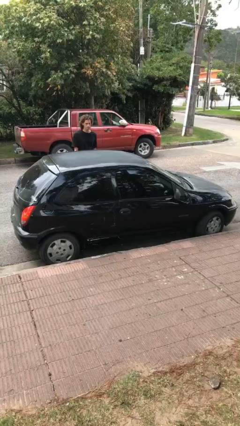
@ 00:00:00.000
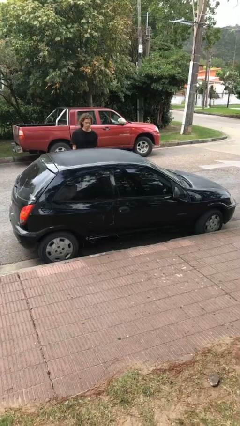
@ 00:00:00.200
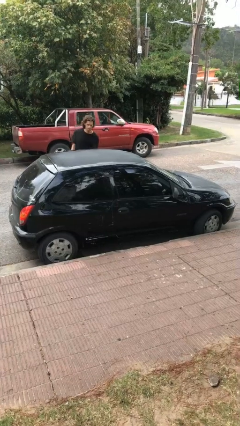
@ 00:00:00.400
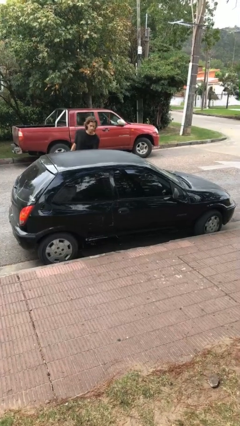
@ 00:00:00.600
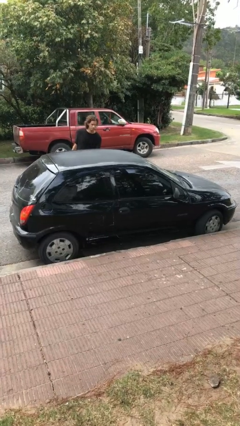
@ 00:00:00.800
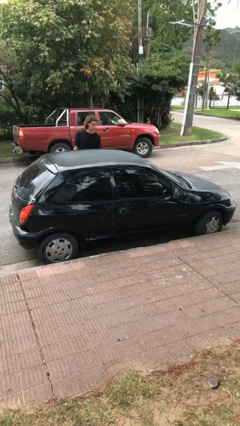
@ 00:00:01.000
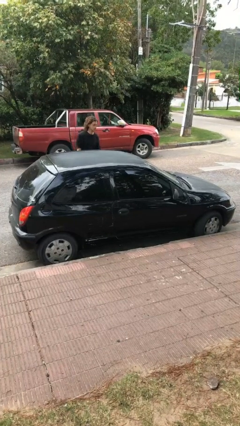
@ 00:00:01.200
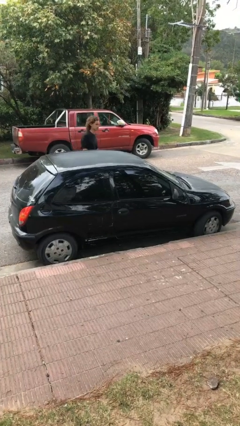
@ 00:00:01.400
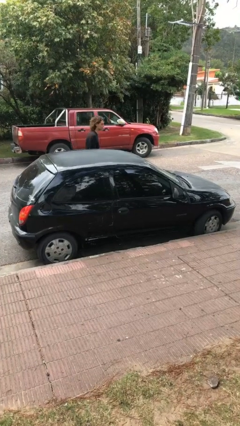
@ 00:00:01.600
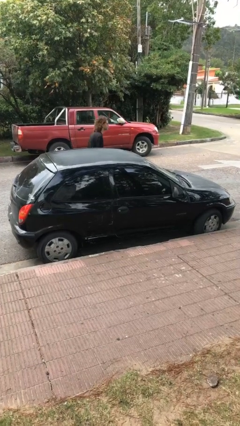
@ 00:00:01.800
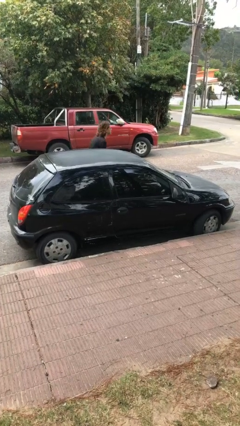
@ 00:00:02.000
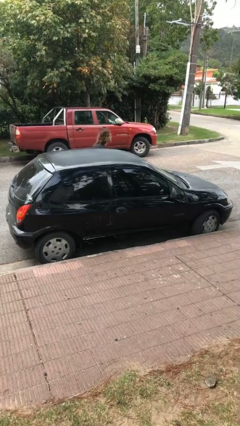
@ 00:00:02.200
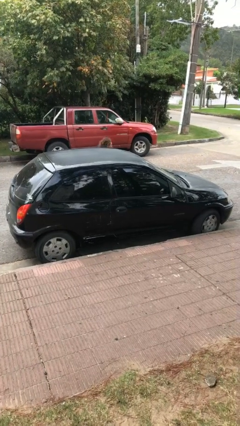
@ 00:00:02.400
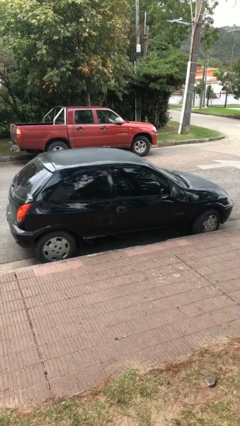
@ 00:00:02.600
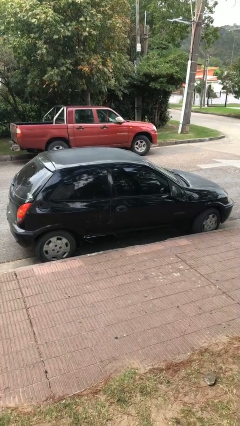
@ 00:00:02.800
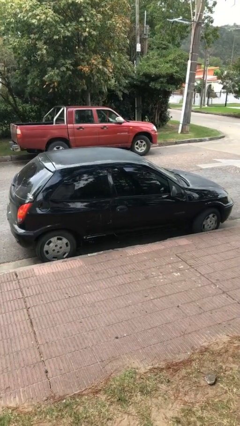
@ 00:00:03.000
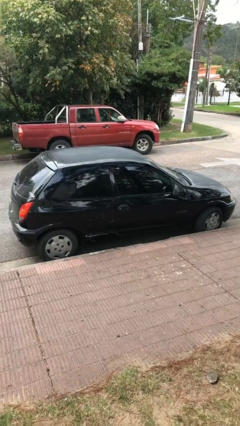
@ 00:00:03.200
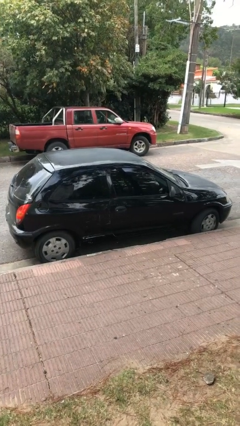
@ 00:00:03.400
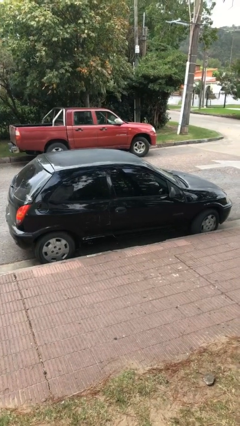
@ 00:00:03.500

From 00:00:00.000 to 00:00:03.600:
car picks up person

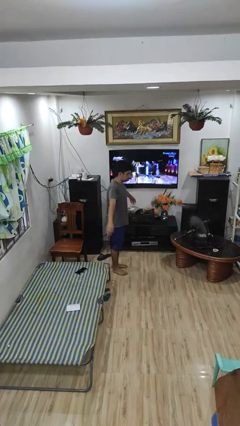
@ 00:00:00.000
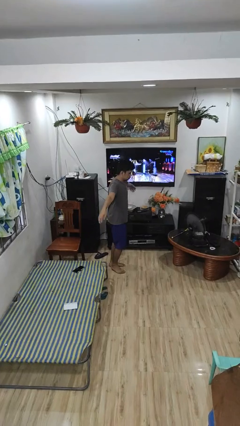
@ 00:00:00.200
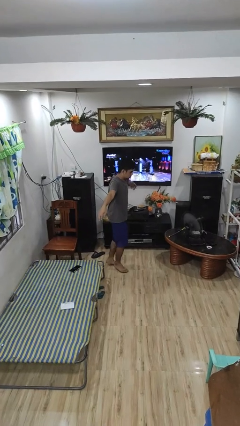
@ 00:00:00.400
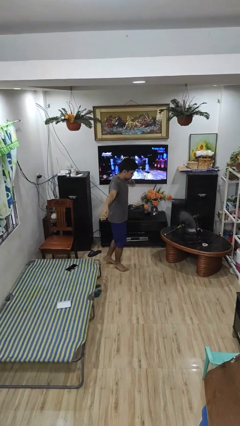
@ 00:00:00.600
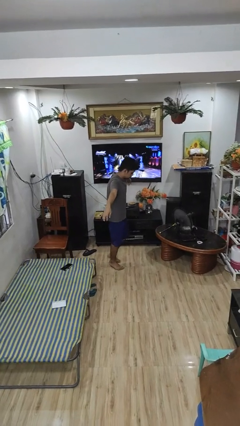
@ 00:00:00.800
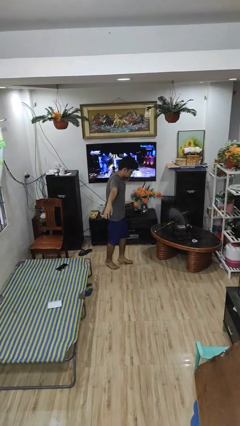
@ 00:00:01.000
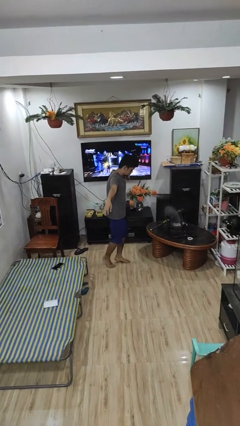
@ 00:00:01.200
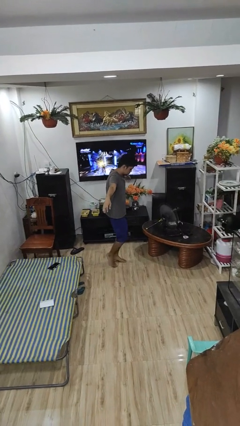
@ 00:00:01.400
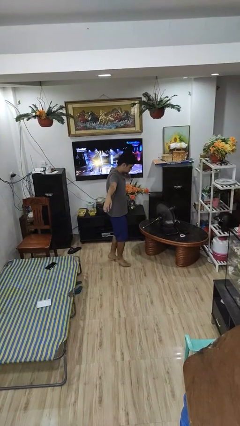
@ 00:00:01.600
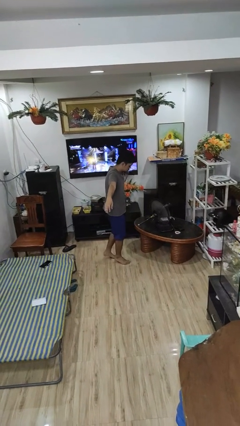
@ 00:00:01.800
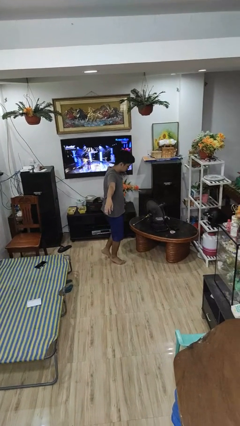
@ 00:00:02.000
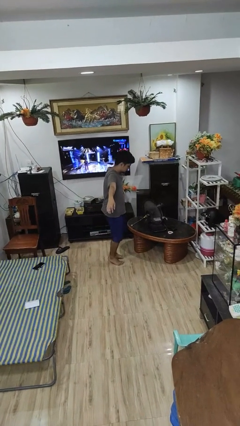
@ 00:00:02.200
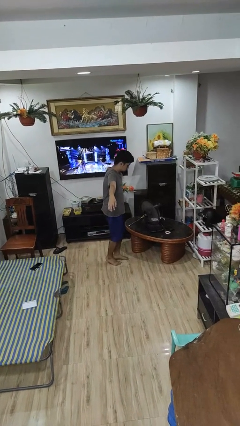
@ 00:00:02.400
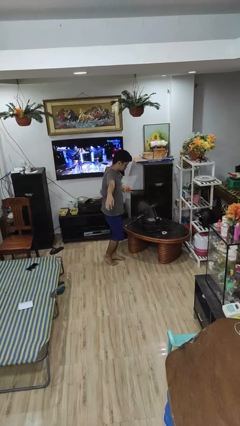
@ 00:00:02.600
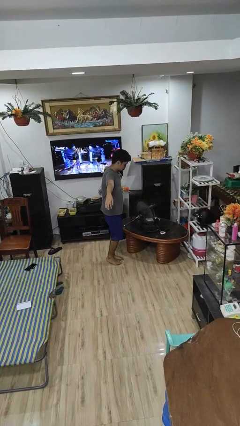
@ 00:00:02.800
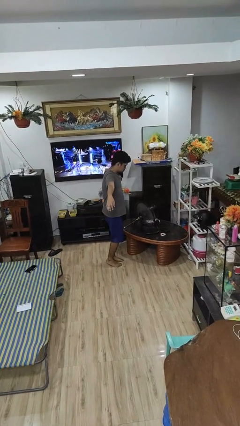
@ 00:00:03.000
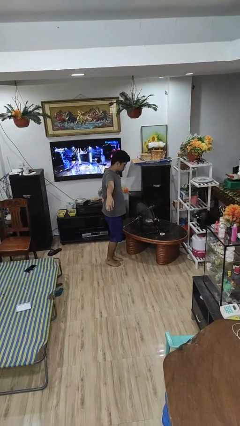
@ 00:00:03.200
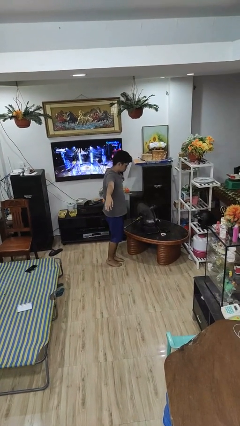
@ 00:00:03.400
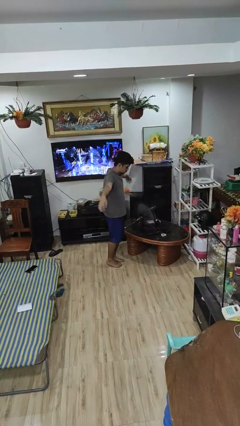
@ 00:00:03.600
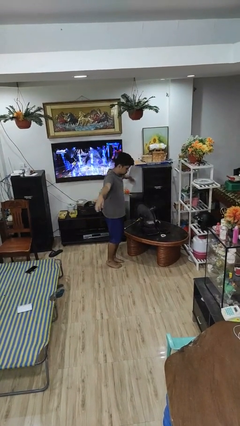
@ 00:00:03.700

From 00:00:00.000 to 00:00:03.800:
person walks tiptoe

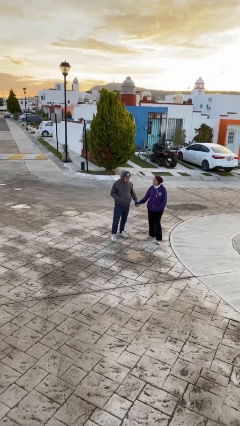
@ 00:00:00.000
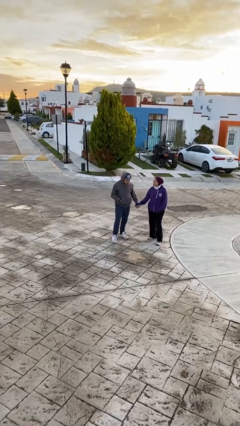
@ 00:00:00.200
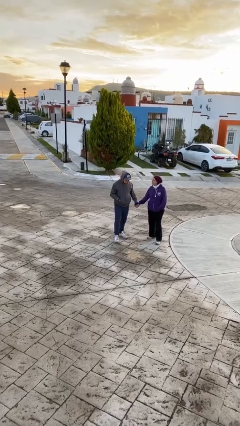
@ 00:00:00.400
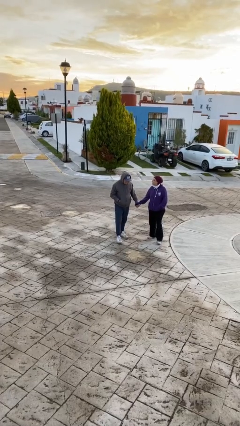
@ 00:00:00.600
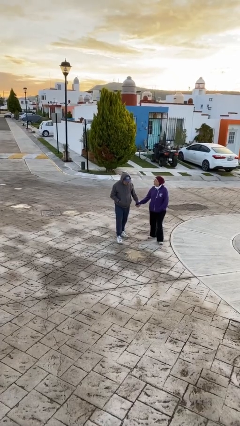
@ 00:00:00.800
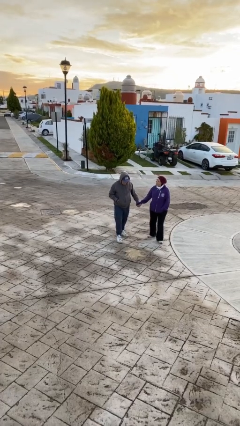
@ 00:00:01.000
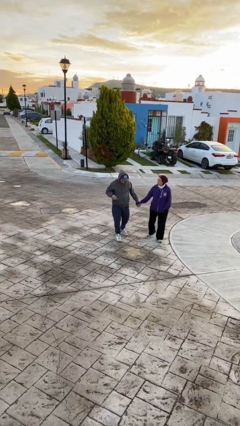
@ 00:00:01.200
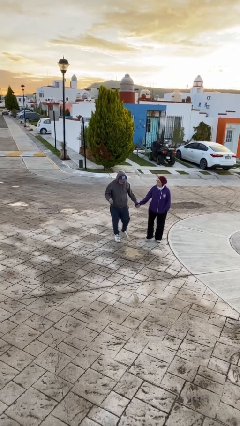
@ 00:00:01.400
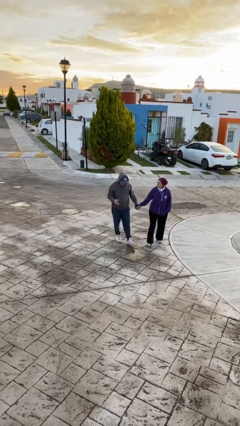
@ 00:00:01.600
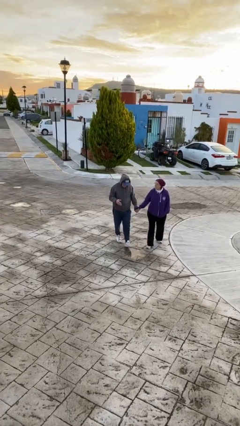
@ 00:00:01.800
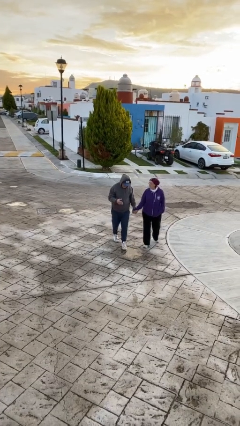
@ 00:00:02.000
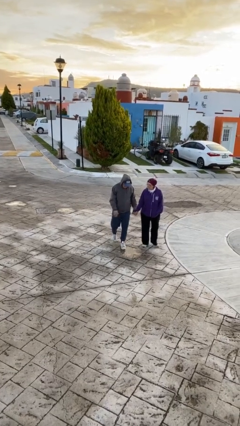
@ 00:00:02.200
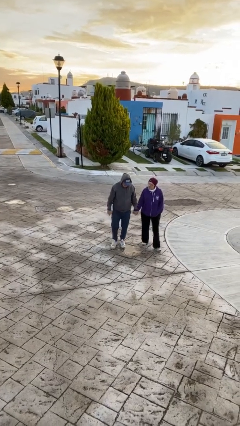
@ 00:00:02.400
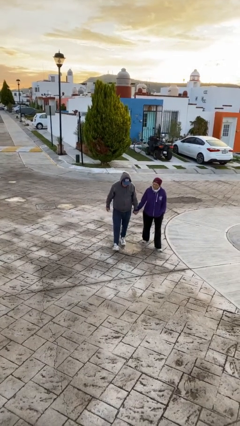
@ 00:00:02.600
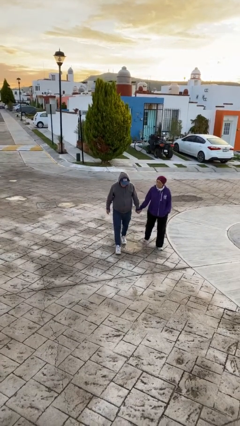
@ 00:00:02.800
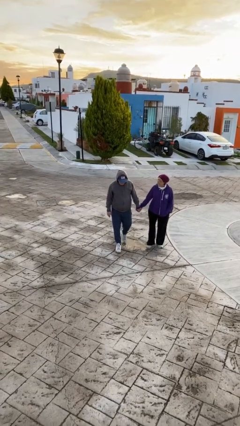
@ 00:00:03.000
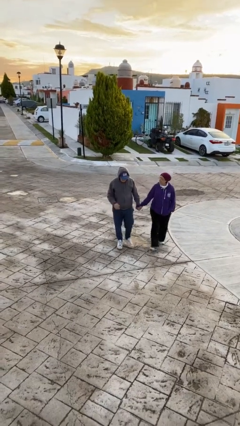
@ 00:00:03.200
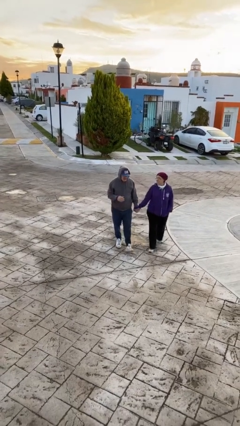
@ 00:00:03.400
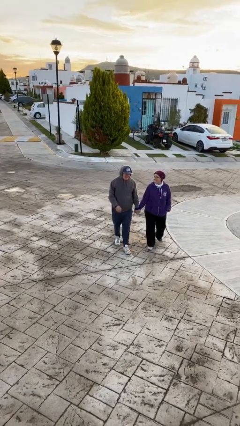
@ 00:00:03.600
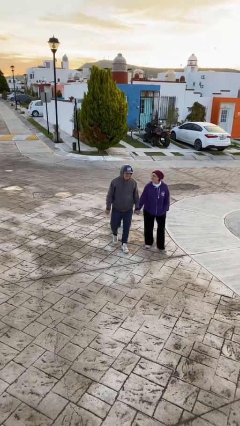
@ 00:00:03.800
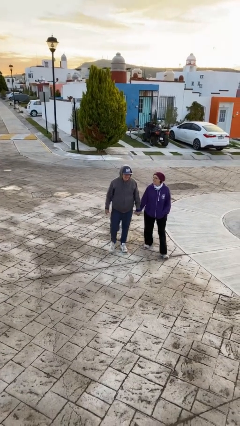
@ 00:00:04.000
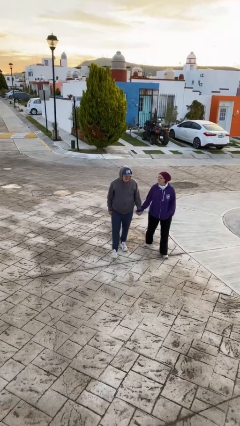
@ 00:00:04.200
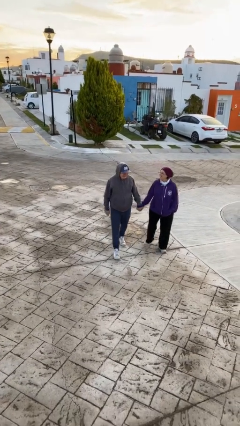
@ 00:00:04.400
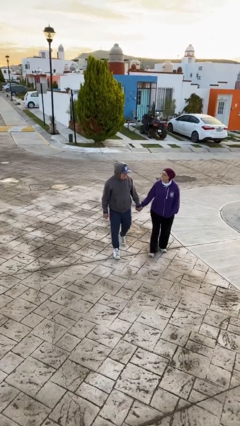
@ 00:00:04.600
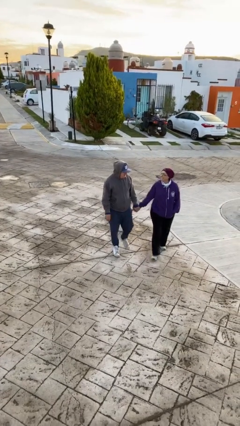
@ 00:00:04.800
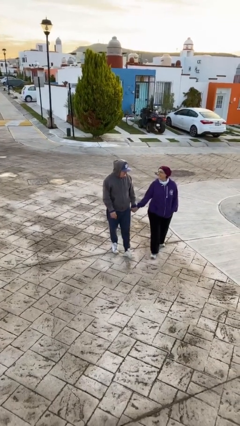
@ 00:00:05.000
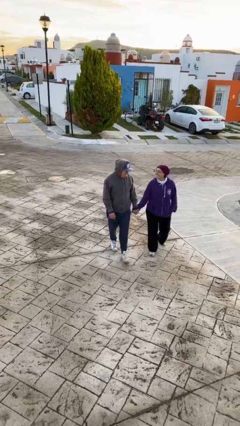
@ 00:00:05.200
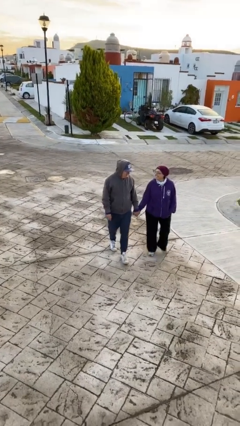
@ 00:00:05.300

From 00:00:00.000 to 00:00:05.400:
person holds hand

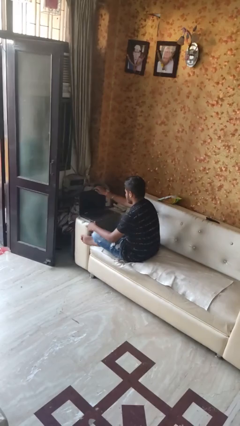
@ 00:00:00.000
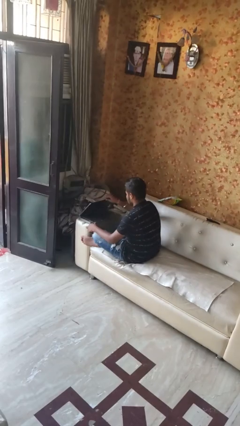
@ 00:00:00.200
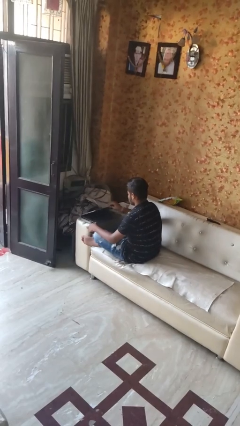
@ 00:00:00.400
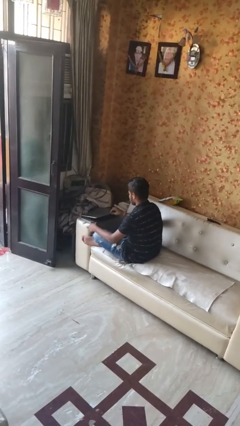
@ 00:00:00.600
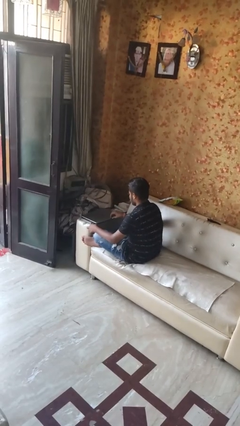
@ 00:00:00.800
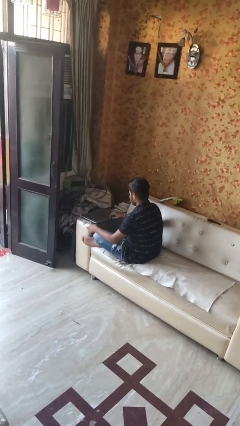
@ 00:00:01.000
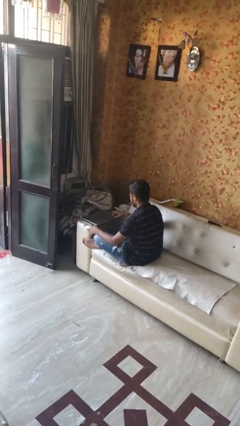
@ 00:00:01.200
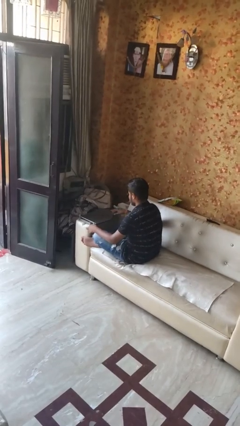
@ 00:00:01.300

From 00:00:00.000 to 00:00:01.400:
person closes laptop

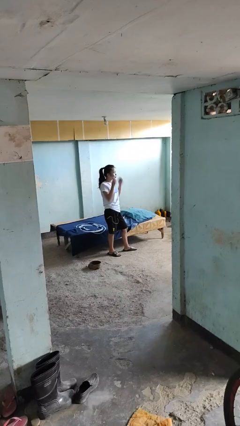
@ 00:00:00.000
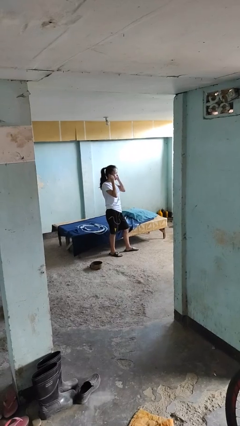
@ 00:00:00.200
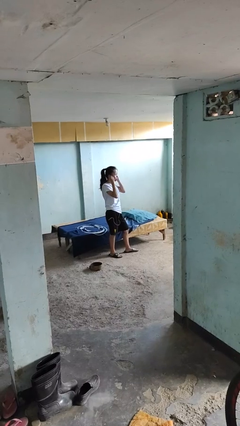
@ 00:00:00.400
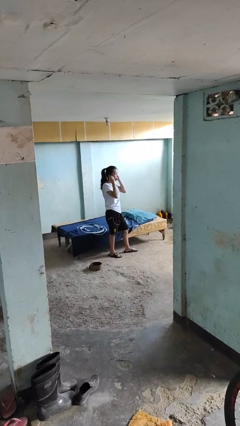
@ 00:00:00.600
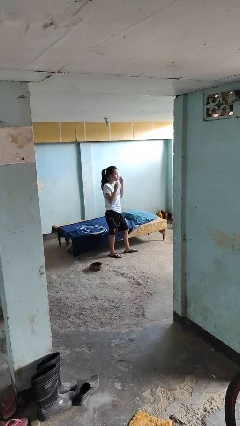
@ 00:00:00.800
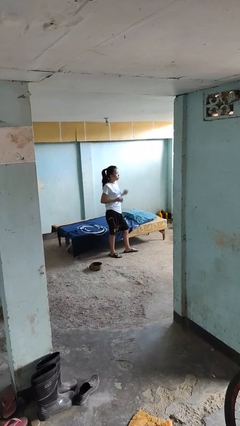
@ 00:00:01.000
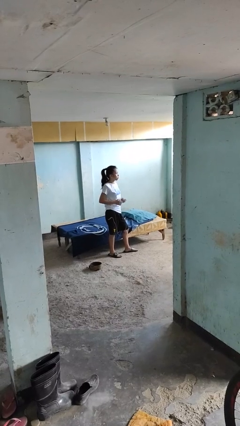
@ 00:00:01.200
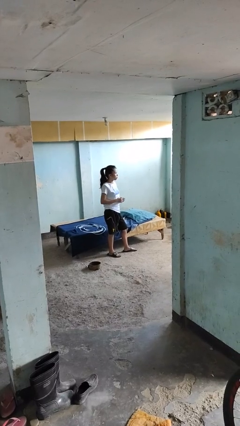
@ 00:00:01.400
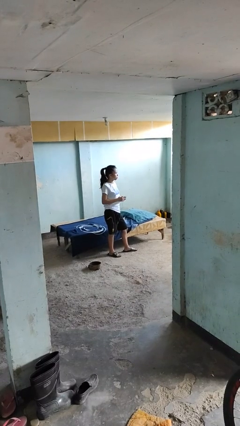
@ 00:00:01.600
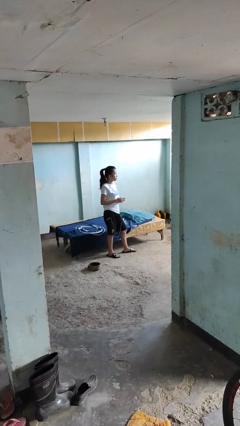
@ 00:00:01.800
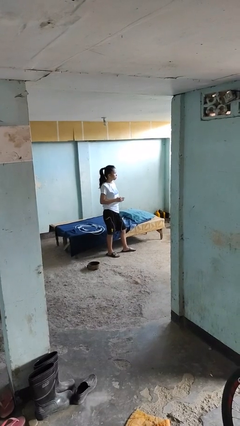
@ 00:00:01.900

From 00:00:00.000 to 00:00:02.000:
person takes off headphones

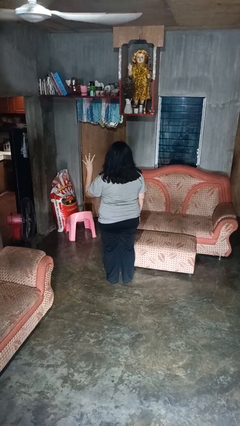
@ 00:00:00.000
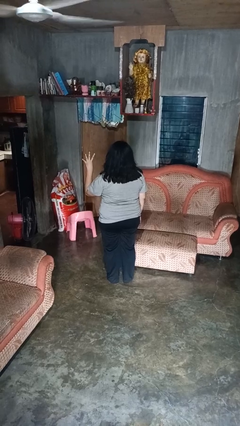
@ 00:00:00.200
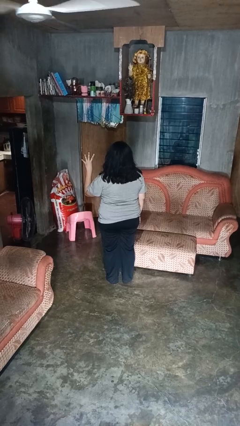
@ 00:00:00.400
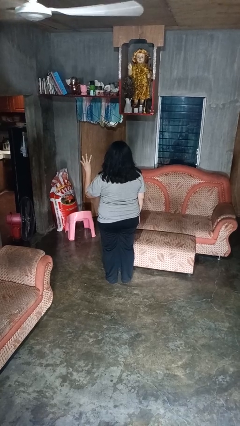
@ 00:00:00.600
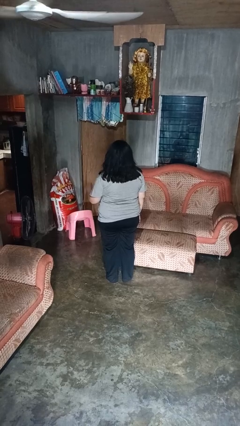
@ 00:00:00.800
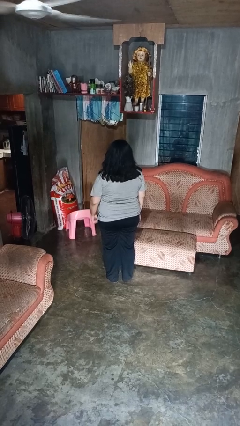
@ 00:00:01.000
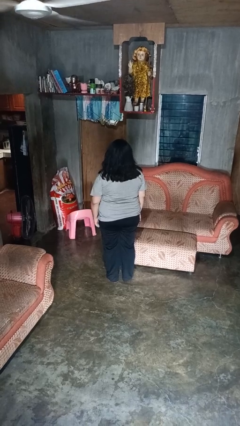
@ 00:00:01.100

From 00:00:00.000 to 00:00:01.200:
person gestures number four
